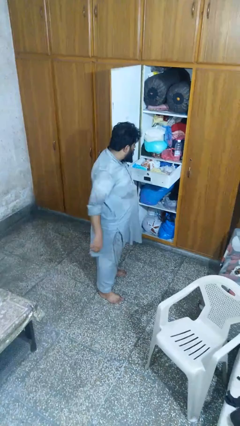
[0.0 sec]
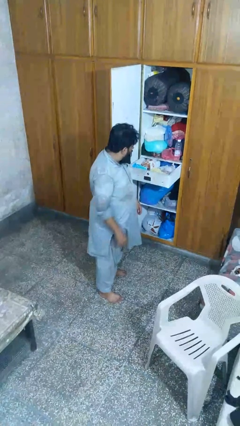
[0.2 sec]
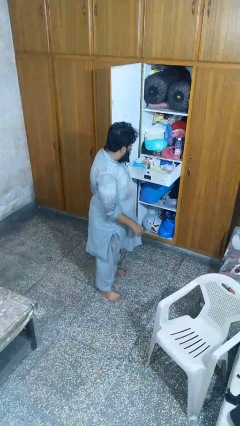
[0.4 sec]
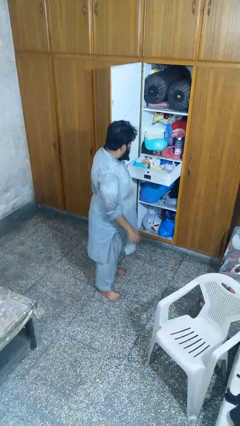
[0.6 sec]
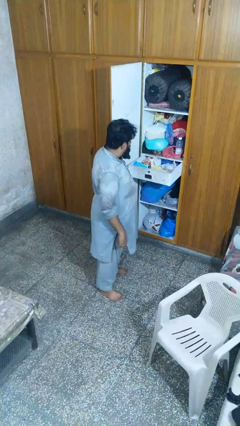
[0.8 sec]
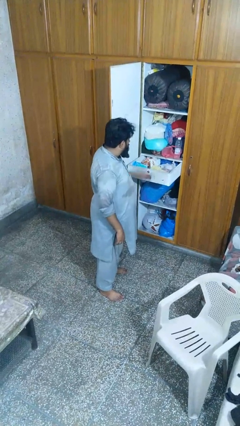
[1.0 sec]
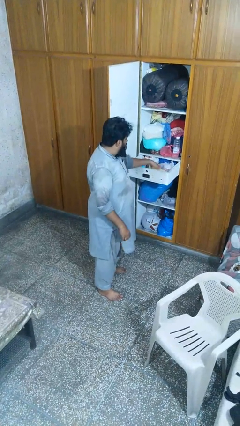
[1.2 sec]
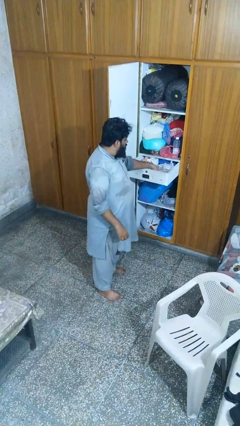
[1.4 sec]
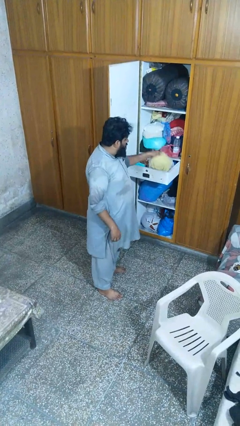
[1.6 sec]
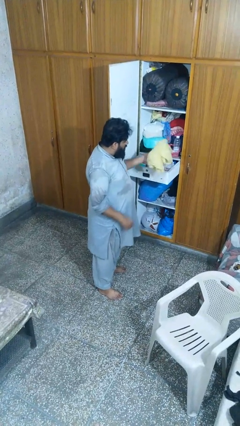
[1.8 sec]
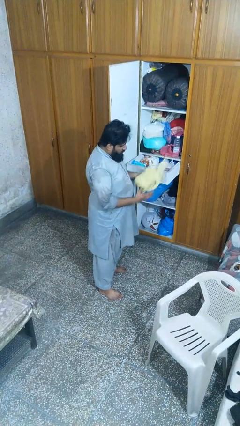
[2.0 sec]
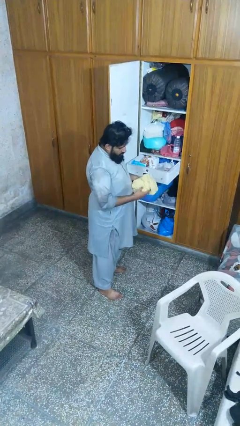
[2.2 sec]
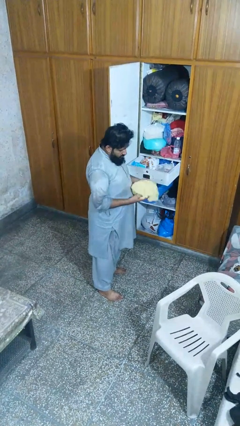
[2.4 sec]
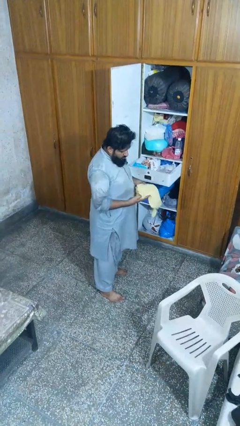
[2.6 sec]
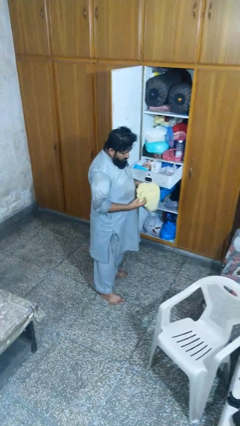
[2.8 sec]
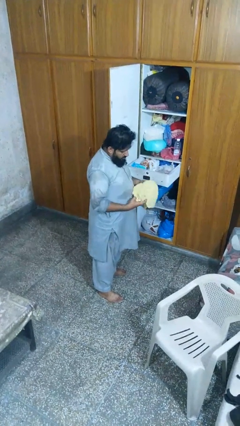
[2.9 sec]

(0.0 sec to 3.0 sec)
person takes clothes from dresser

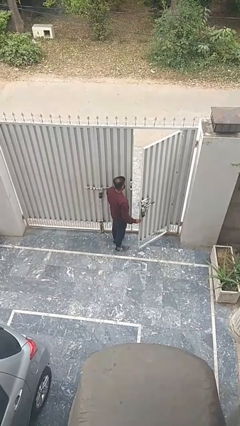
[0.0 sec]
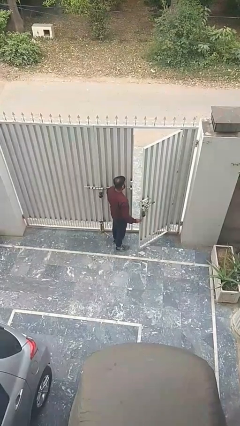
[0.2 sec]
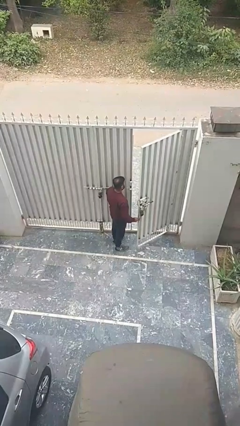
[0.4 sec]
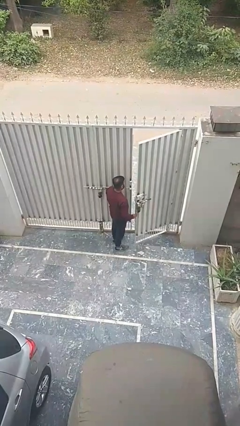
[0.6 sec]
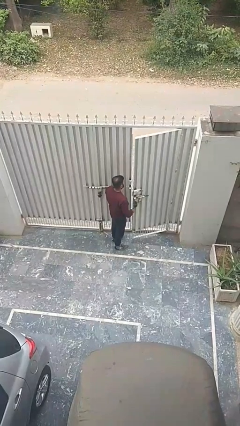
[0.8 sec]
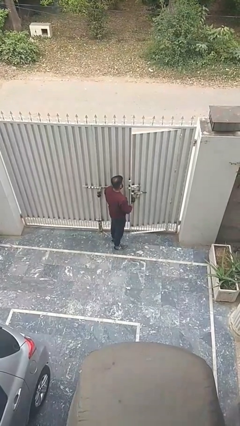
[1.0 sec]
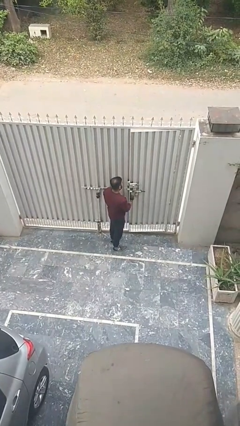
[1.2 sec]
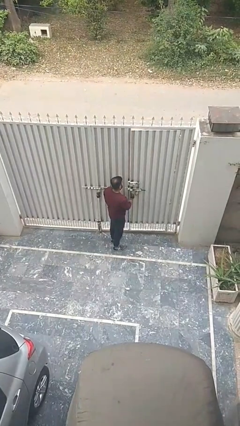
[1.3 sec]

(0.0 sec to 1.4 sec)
person closes facility door

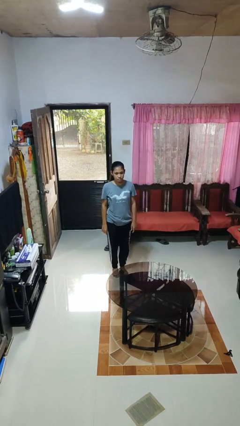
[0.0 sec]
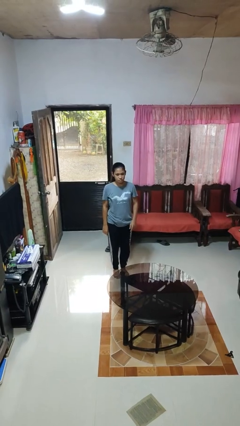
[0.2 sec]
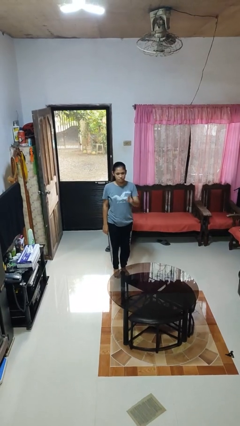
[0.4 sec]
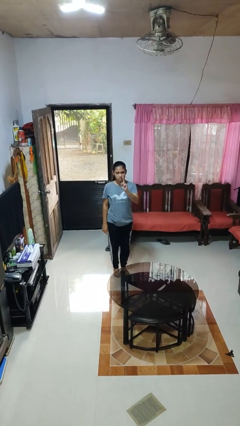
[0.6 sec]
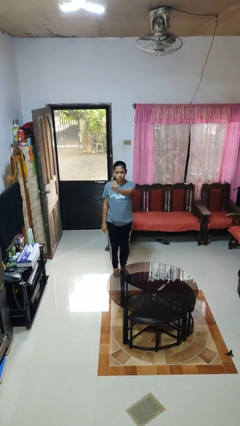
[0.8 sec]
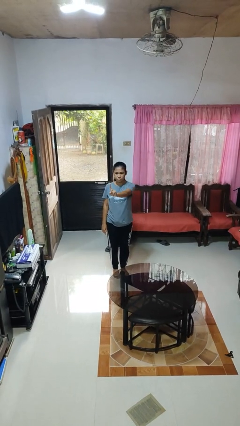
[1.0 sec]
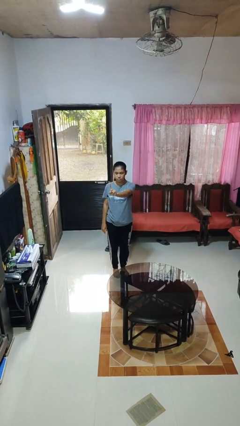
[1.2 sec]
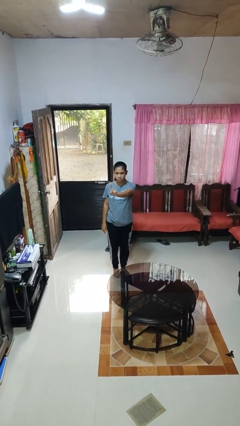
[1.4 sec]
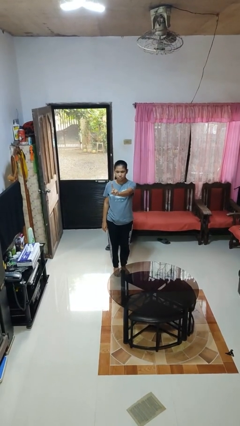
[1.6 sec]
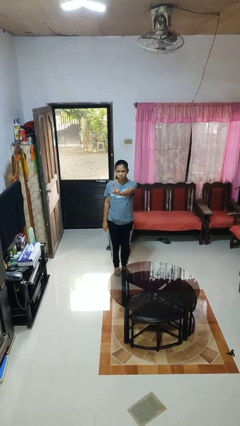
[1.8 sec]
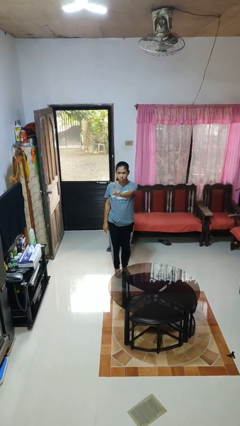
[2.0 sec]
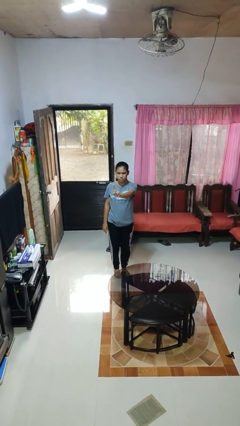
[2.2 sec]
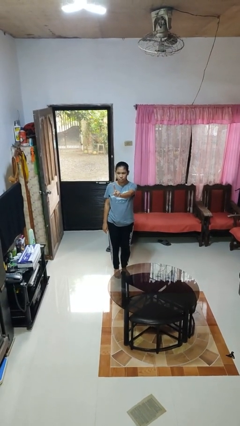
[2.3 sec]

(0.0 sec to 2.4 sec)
person gestures number one

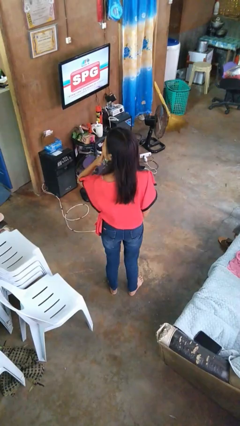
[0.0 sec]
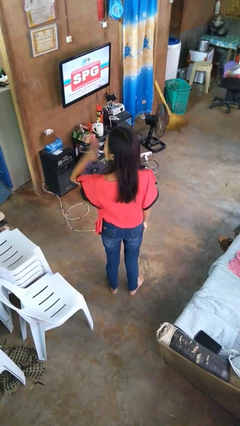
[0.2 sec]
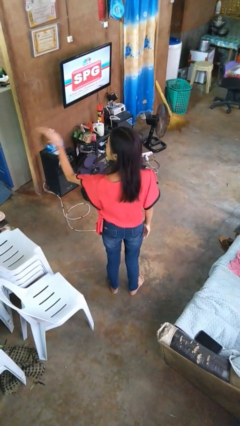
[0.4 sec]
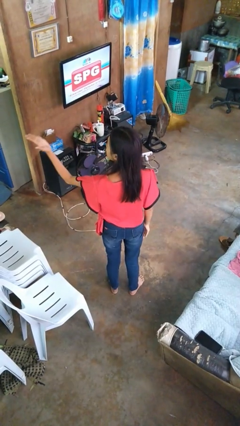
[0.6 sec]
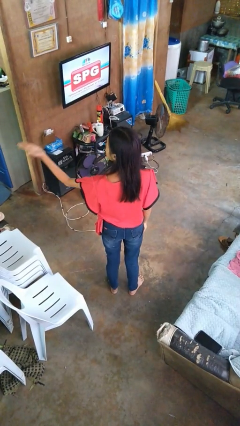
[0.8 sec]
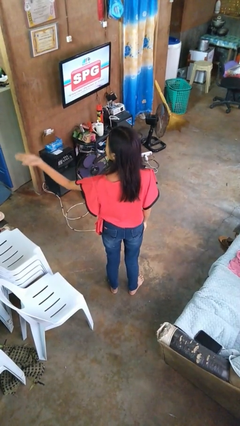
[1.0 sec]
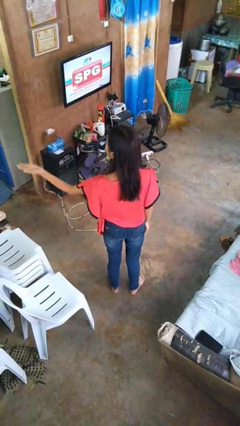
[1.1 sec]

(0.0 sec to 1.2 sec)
person gestures blow kiss

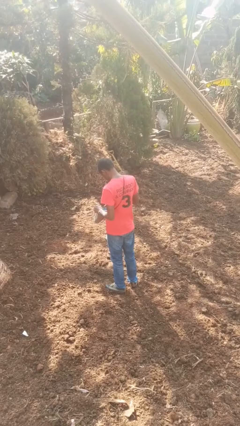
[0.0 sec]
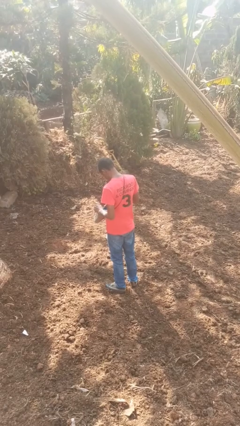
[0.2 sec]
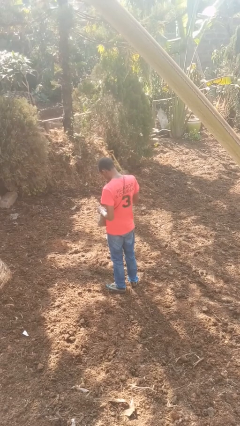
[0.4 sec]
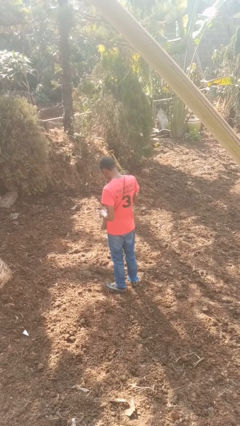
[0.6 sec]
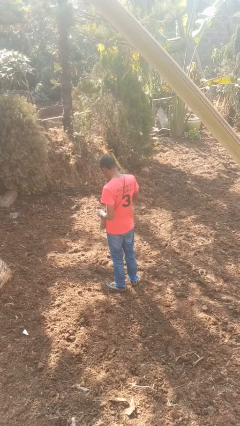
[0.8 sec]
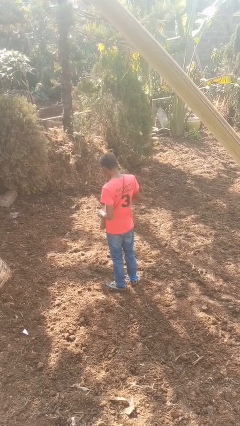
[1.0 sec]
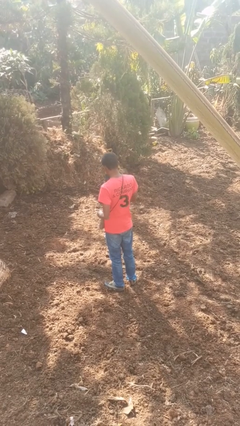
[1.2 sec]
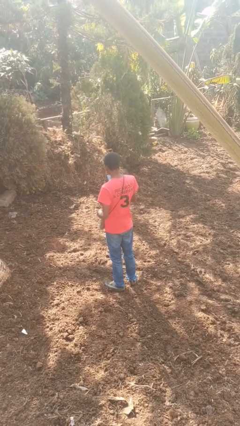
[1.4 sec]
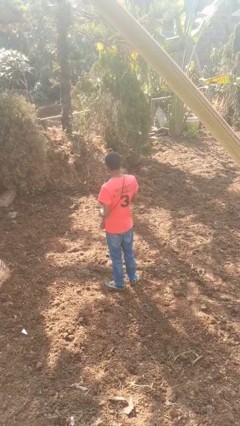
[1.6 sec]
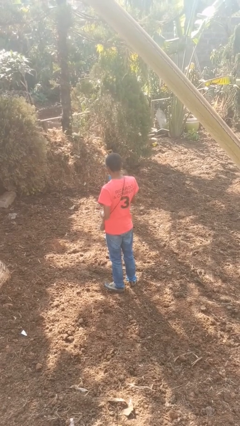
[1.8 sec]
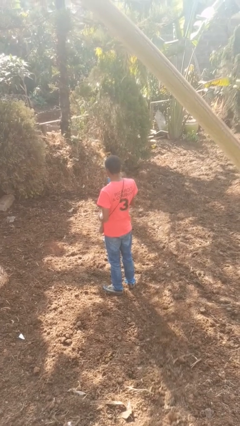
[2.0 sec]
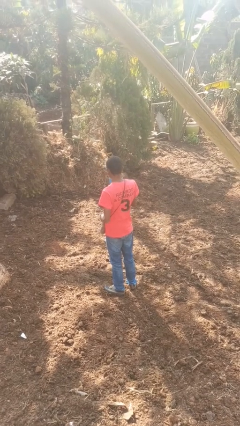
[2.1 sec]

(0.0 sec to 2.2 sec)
person takes object from purse

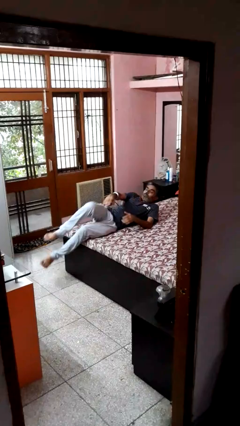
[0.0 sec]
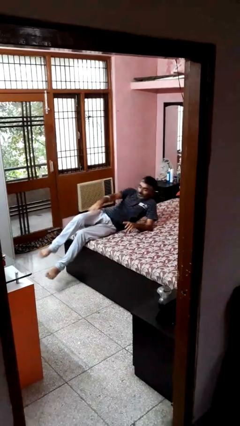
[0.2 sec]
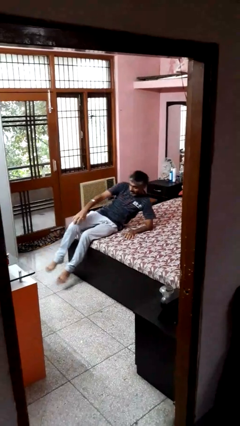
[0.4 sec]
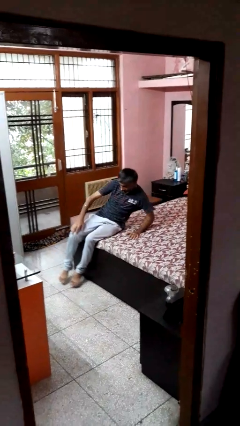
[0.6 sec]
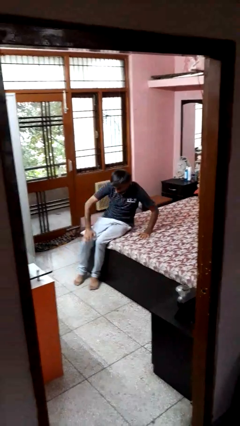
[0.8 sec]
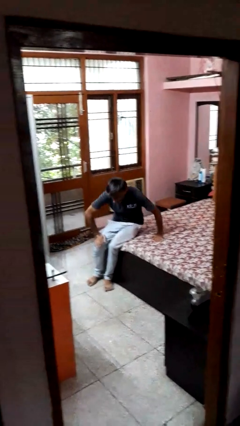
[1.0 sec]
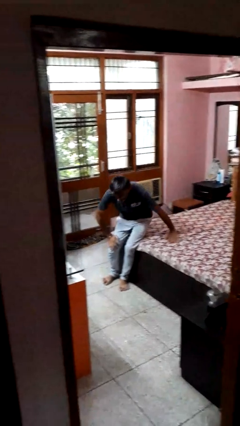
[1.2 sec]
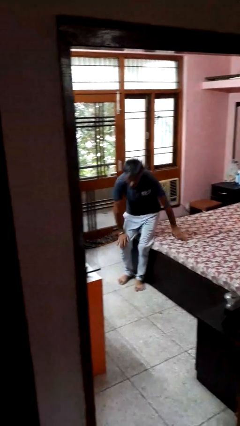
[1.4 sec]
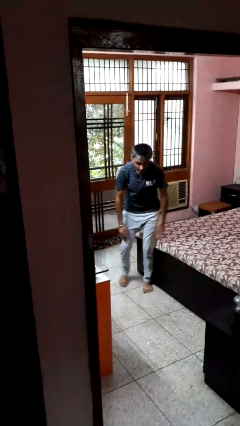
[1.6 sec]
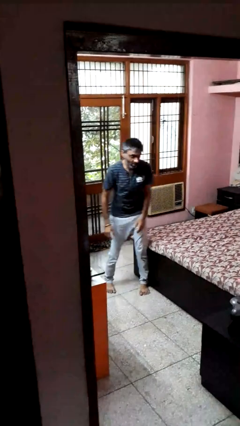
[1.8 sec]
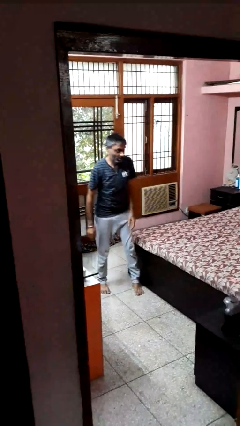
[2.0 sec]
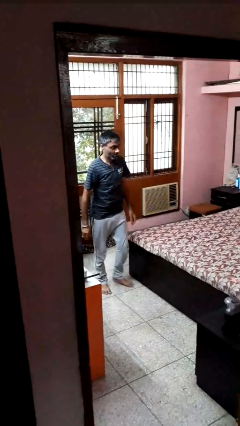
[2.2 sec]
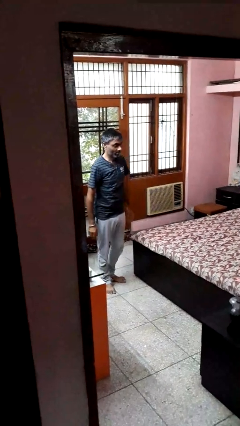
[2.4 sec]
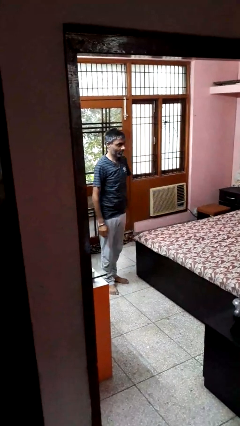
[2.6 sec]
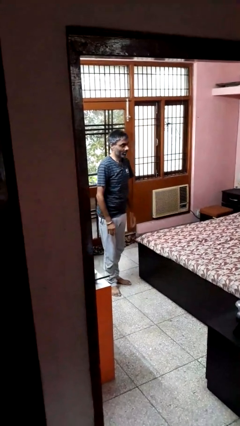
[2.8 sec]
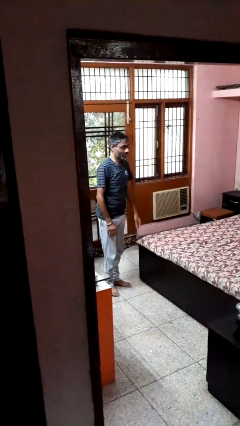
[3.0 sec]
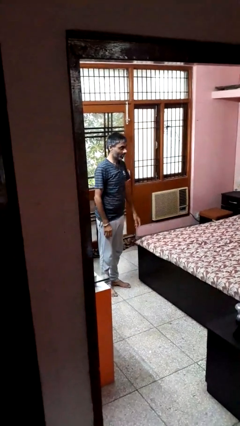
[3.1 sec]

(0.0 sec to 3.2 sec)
person stands up

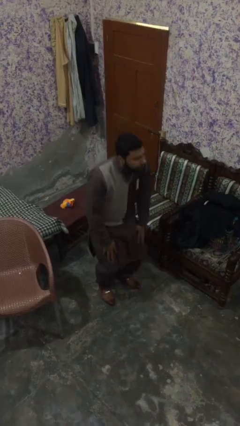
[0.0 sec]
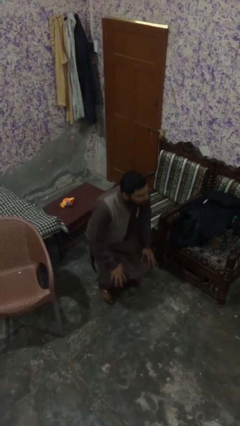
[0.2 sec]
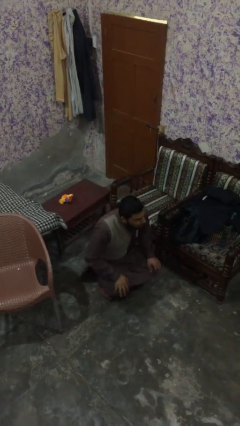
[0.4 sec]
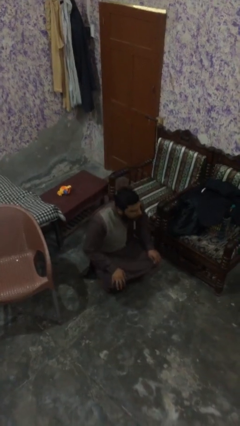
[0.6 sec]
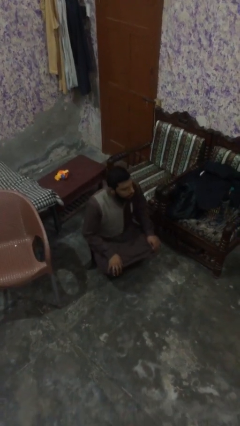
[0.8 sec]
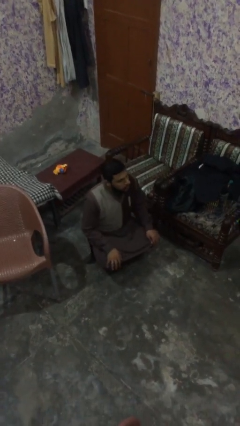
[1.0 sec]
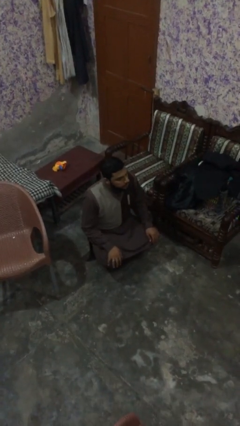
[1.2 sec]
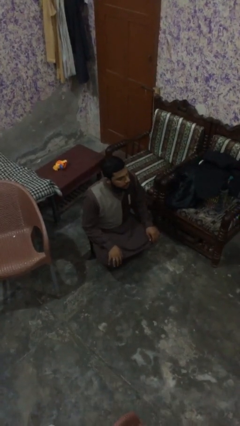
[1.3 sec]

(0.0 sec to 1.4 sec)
person sits down

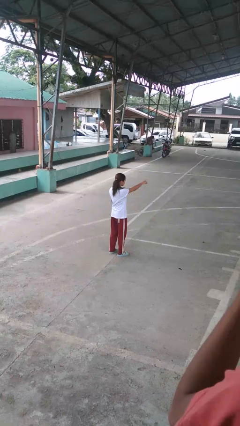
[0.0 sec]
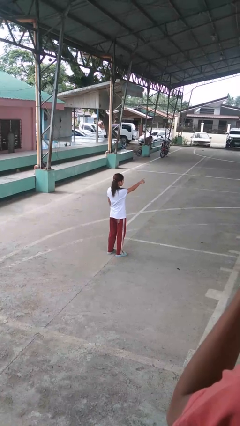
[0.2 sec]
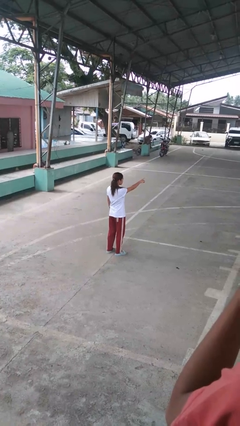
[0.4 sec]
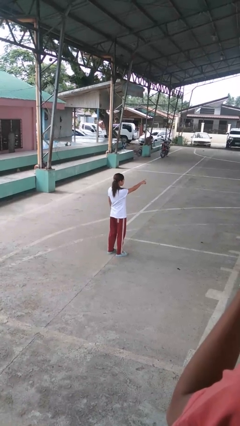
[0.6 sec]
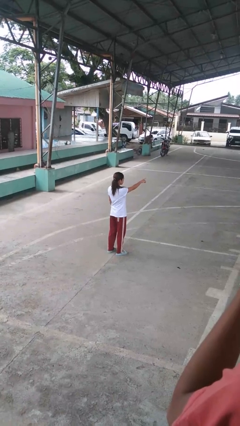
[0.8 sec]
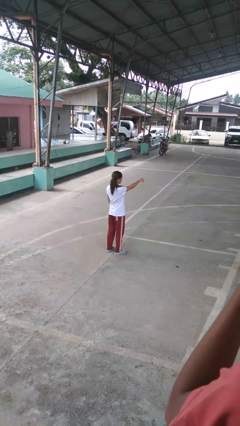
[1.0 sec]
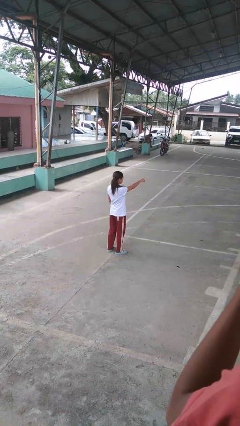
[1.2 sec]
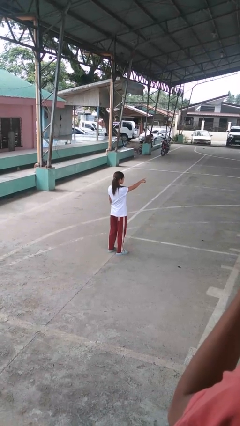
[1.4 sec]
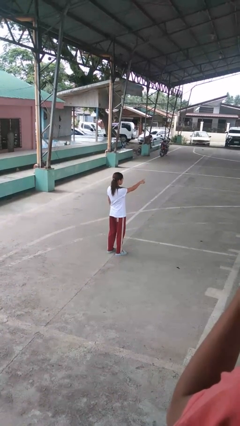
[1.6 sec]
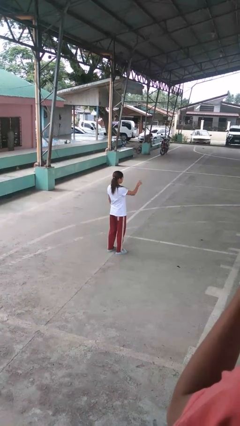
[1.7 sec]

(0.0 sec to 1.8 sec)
person points at person

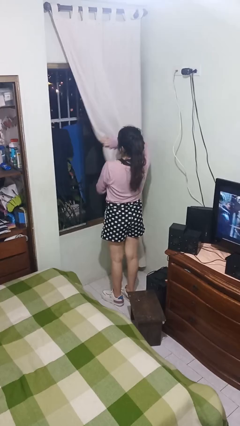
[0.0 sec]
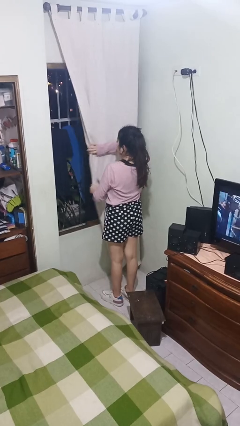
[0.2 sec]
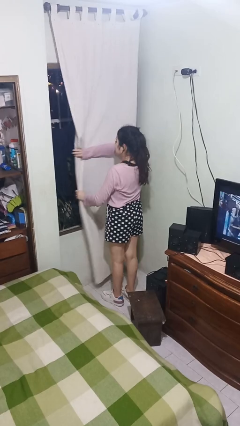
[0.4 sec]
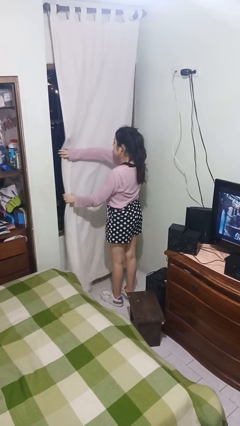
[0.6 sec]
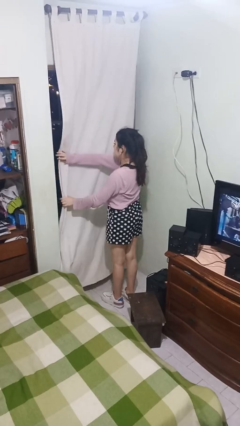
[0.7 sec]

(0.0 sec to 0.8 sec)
person closes curtains
